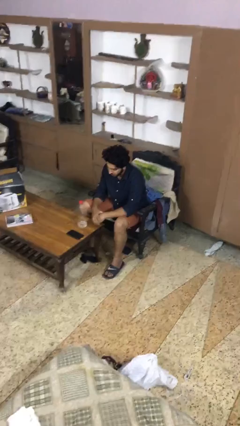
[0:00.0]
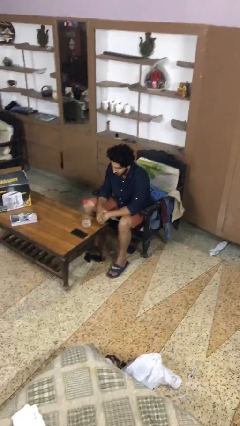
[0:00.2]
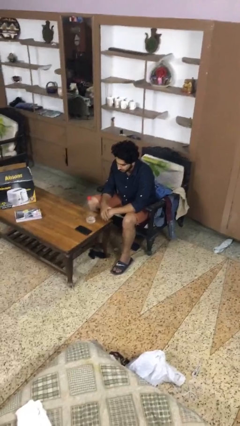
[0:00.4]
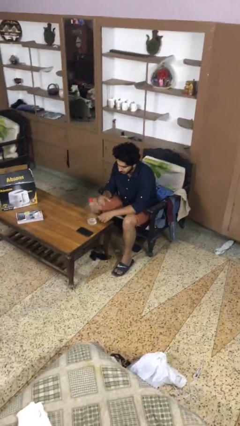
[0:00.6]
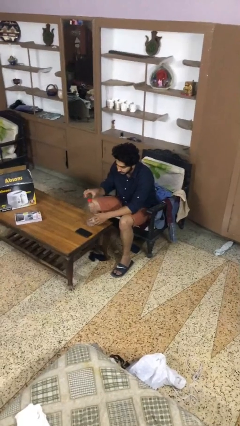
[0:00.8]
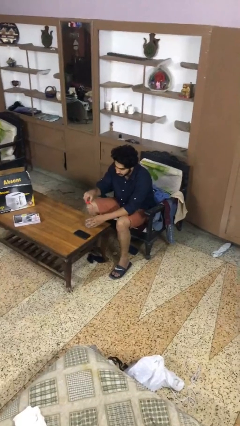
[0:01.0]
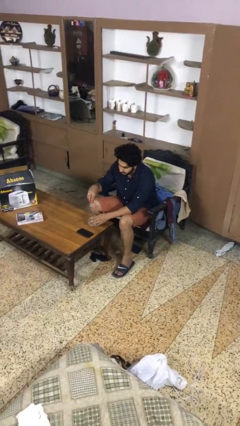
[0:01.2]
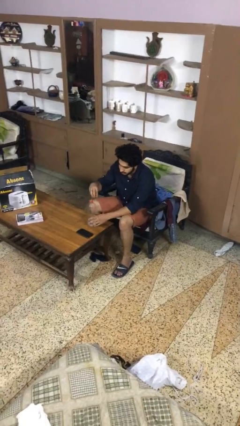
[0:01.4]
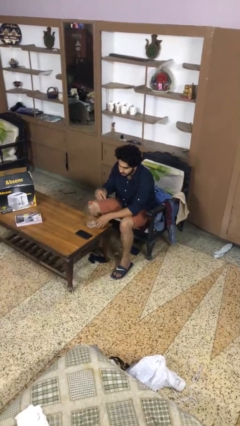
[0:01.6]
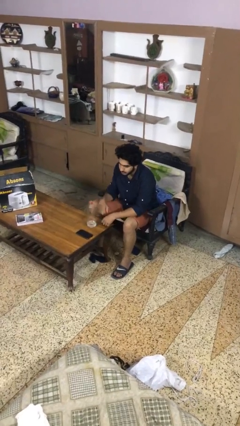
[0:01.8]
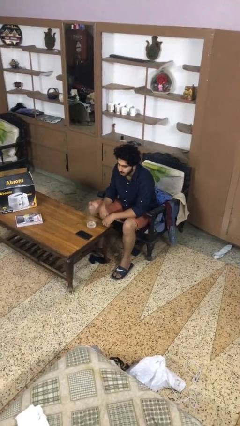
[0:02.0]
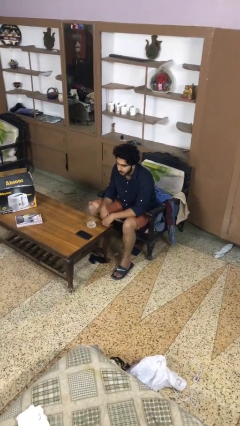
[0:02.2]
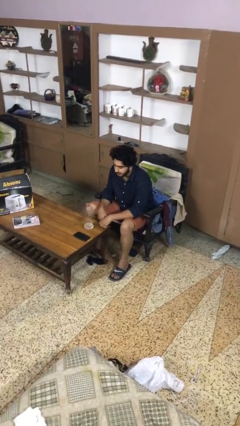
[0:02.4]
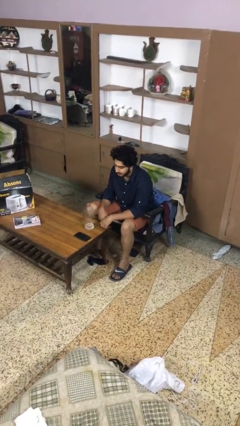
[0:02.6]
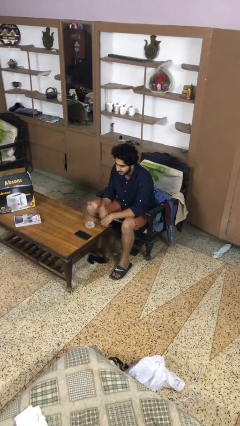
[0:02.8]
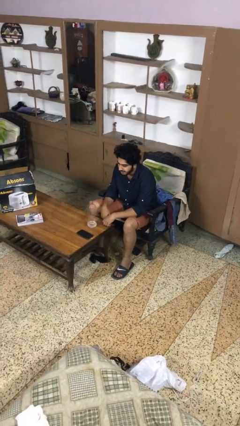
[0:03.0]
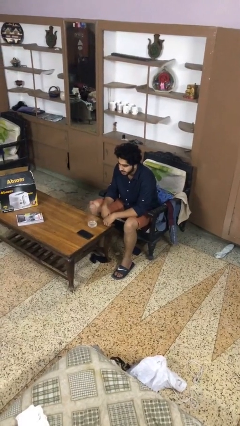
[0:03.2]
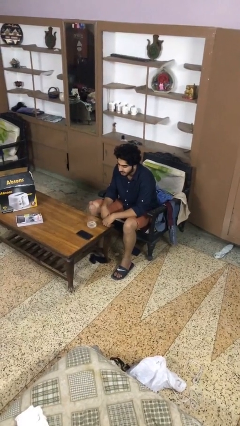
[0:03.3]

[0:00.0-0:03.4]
person unscrews lid from bottle

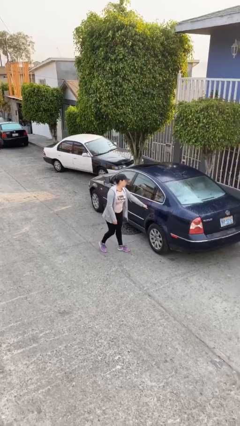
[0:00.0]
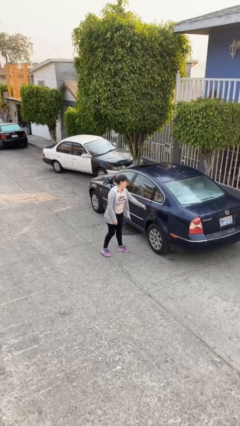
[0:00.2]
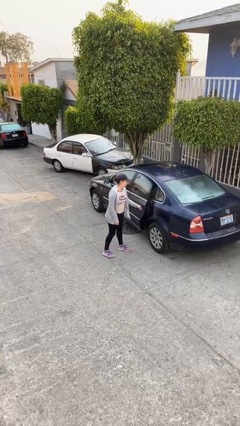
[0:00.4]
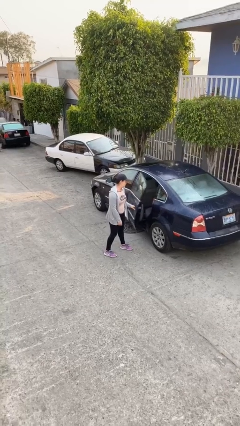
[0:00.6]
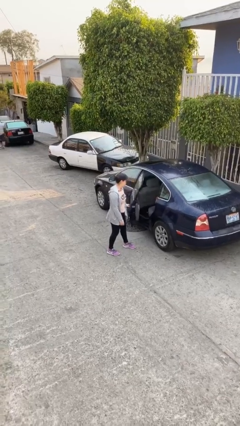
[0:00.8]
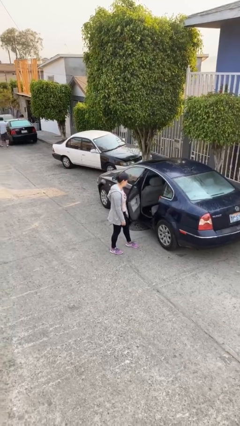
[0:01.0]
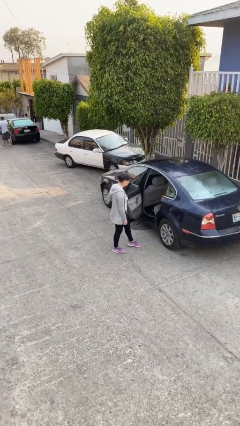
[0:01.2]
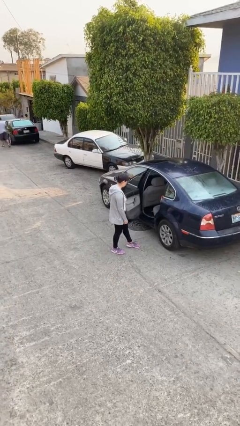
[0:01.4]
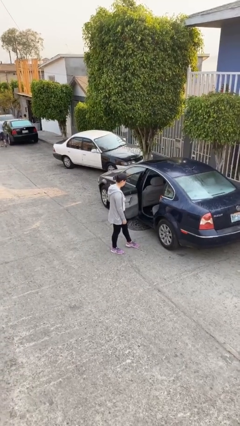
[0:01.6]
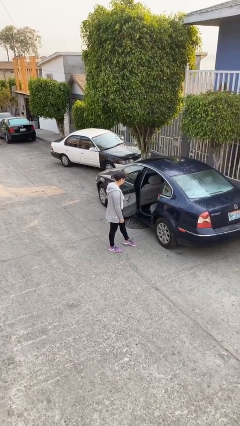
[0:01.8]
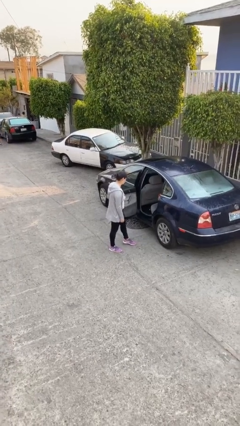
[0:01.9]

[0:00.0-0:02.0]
person opens car door

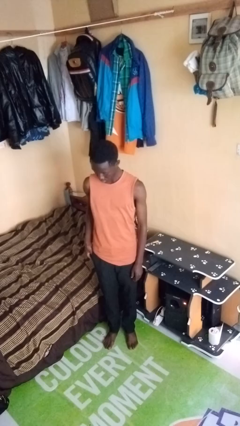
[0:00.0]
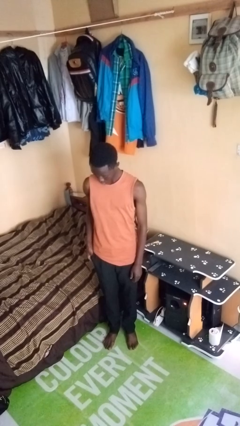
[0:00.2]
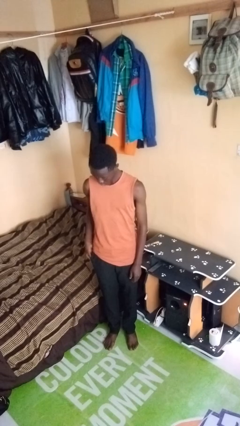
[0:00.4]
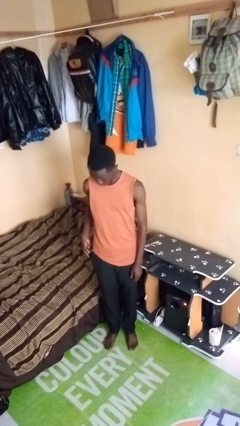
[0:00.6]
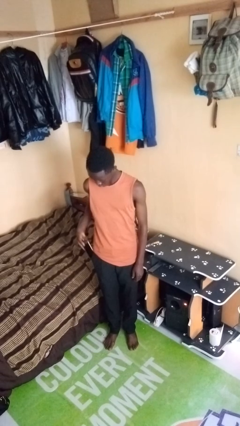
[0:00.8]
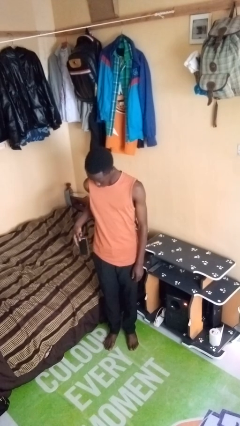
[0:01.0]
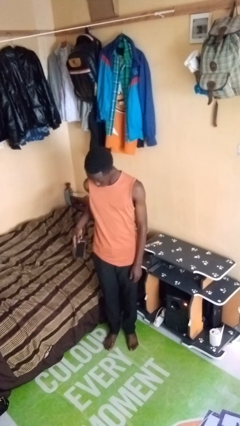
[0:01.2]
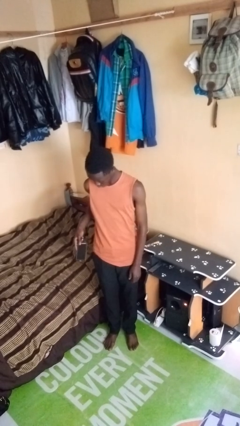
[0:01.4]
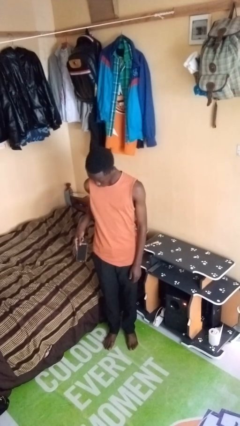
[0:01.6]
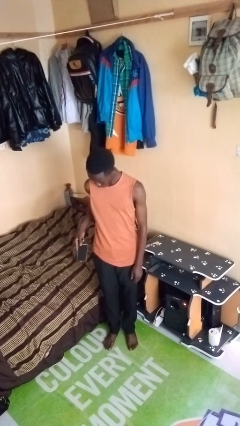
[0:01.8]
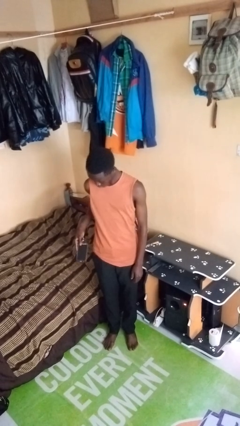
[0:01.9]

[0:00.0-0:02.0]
person takes phone from pocket

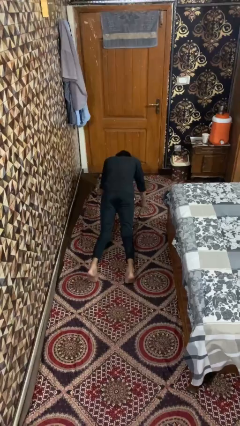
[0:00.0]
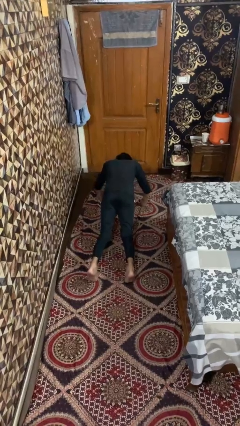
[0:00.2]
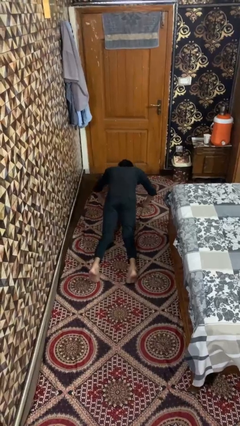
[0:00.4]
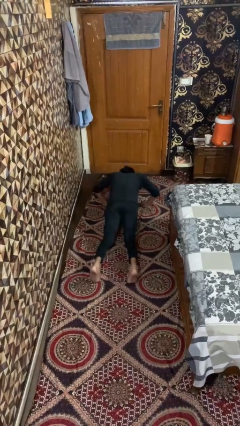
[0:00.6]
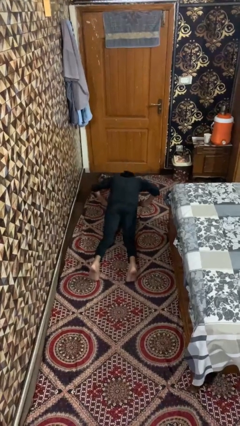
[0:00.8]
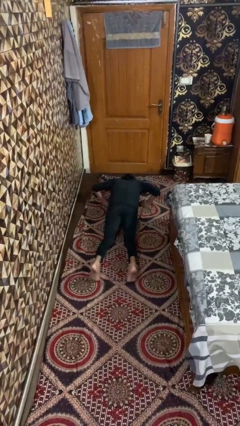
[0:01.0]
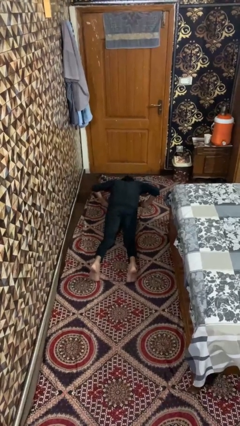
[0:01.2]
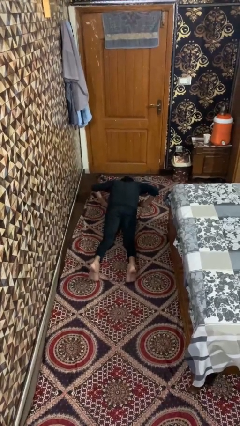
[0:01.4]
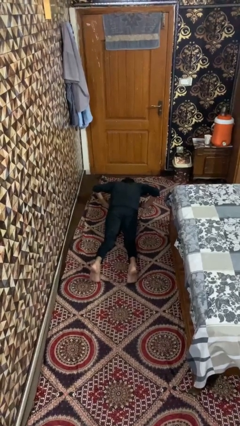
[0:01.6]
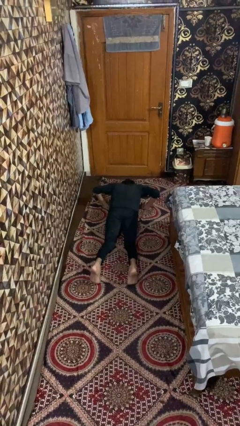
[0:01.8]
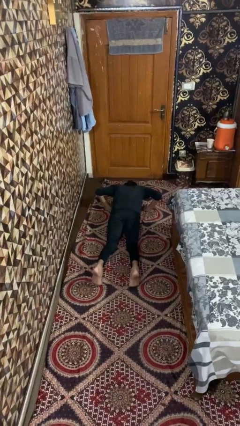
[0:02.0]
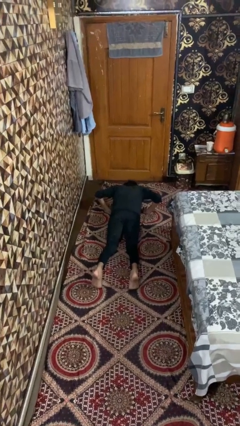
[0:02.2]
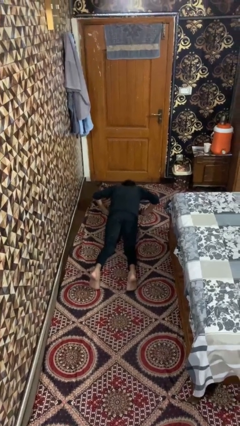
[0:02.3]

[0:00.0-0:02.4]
person exercises with pushup

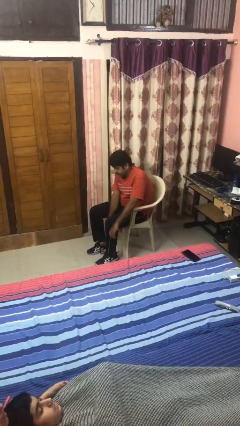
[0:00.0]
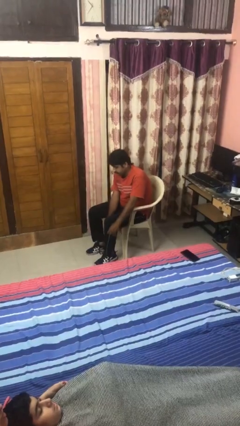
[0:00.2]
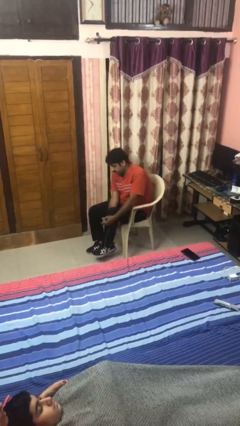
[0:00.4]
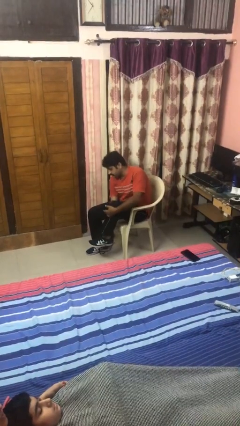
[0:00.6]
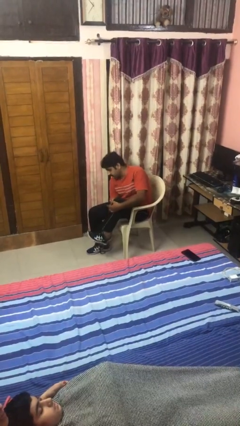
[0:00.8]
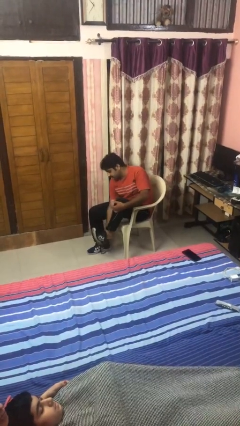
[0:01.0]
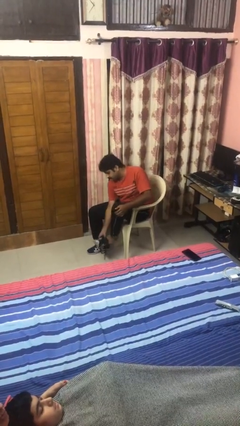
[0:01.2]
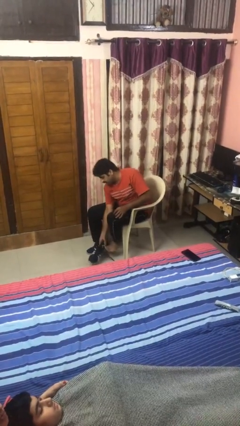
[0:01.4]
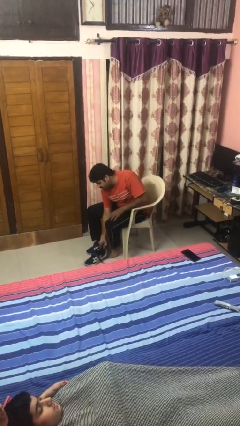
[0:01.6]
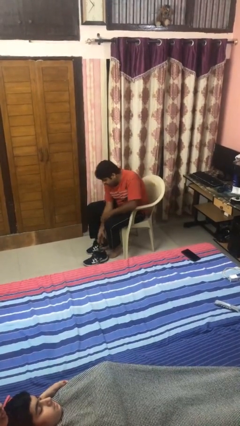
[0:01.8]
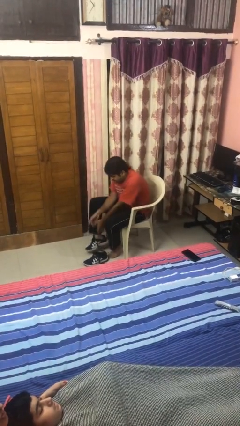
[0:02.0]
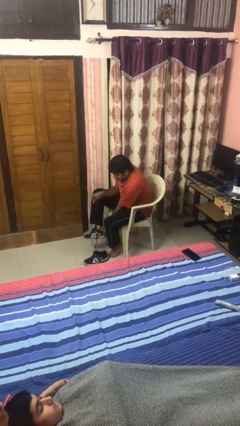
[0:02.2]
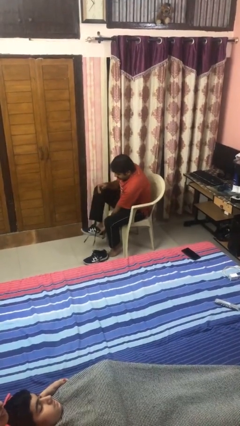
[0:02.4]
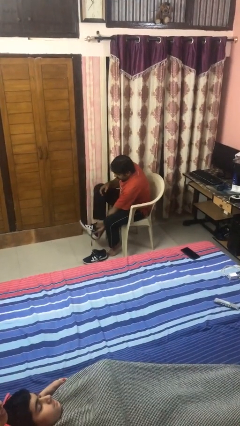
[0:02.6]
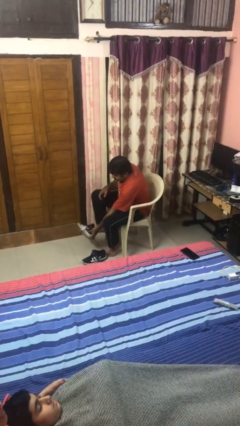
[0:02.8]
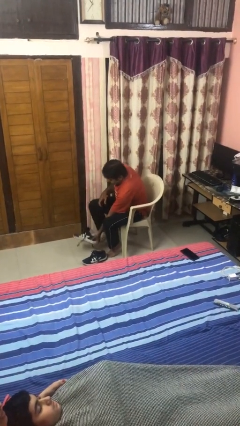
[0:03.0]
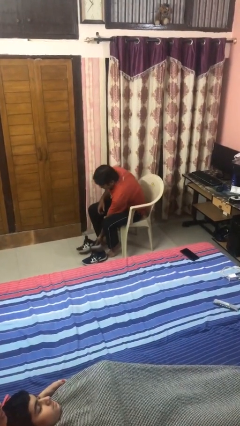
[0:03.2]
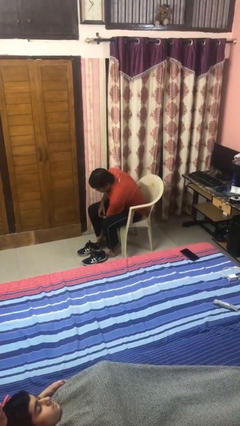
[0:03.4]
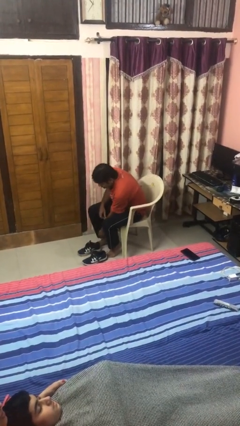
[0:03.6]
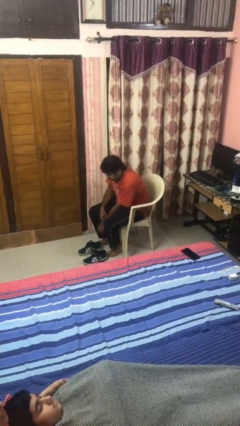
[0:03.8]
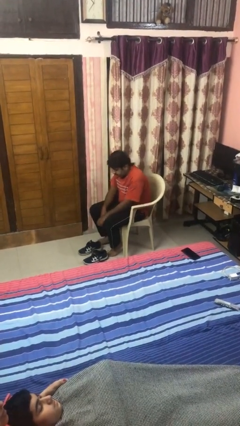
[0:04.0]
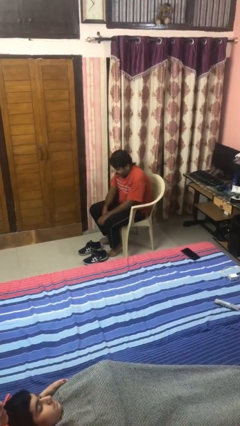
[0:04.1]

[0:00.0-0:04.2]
person takes off boots

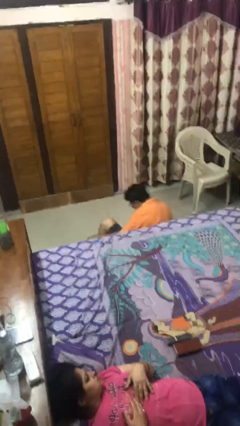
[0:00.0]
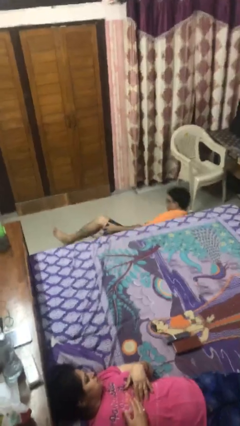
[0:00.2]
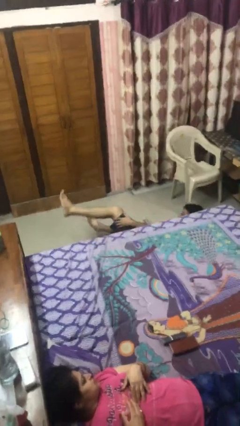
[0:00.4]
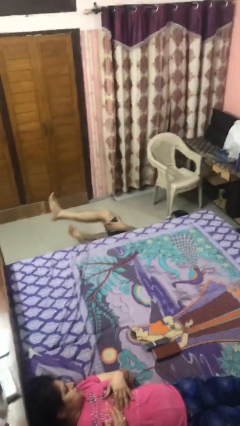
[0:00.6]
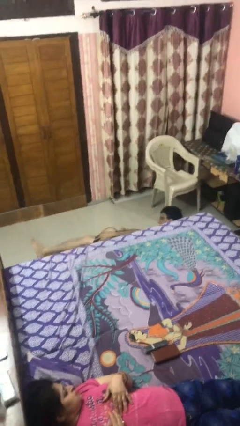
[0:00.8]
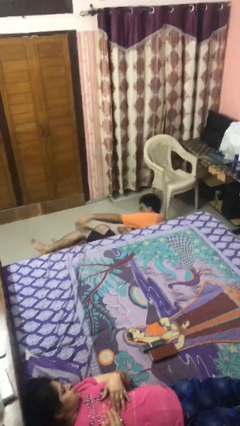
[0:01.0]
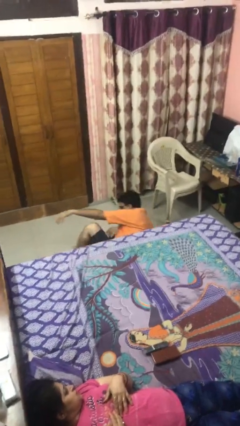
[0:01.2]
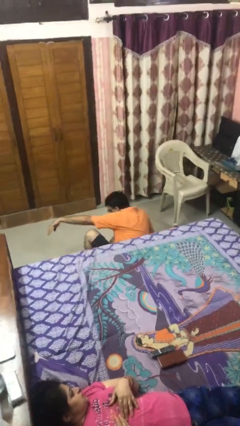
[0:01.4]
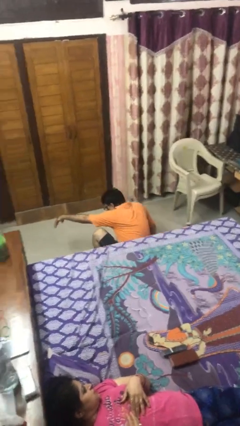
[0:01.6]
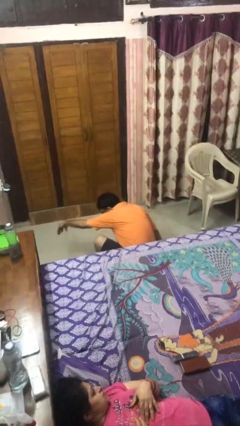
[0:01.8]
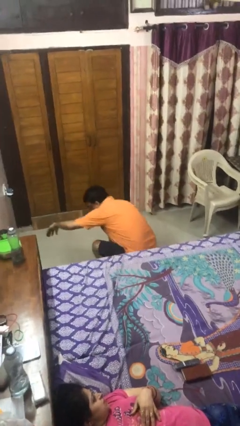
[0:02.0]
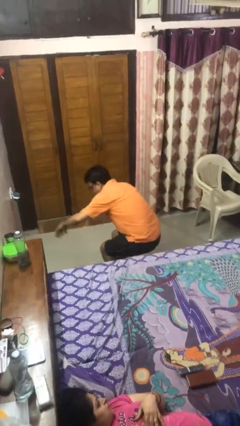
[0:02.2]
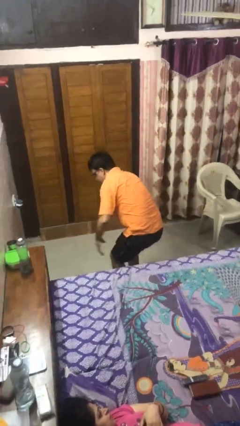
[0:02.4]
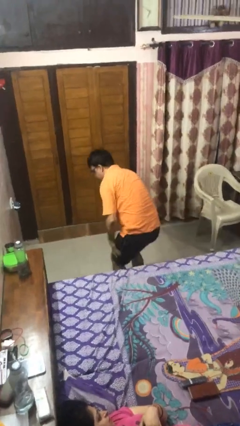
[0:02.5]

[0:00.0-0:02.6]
person stands up from floor

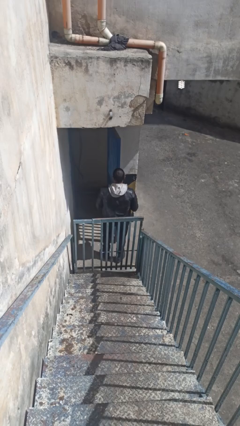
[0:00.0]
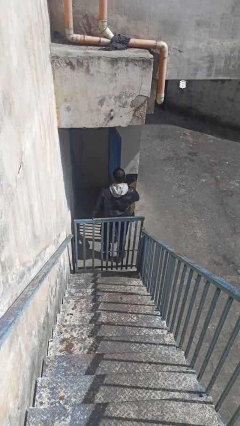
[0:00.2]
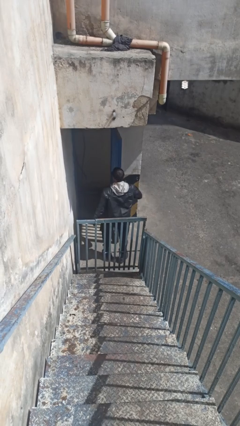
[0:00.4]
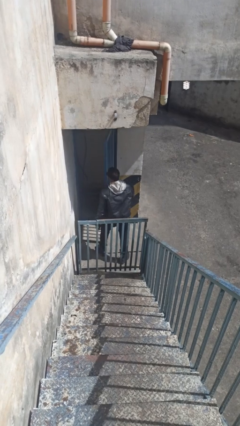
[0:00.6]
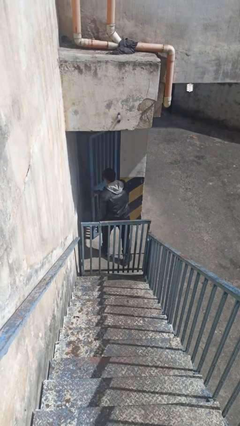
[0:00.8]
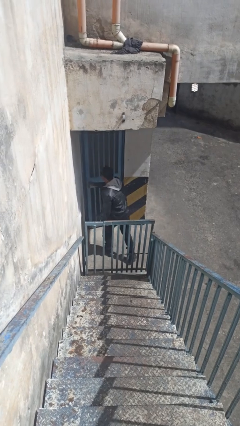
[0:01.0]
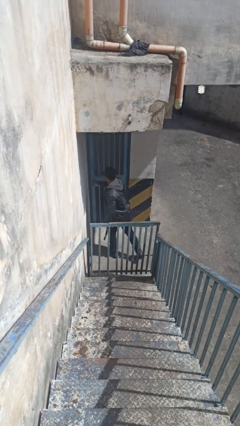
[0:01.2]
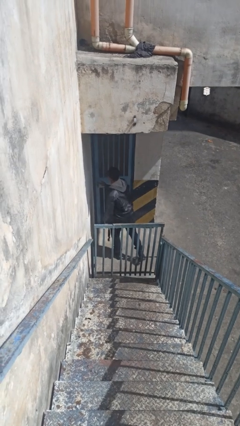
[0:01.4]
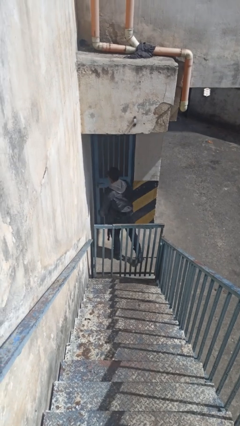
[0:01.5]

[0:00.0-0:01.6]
person closes facility door
